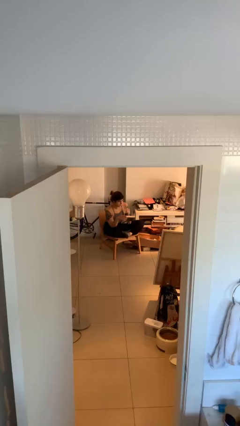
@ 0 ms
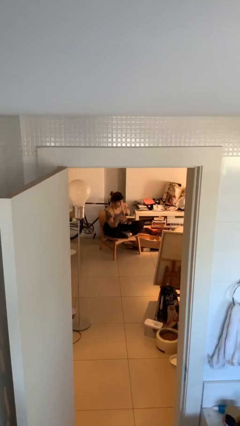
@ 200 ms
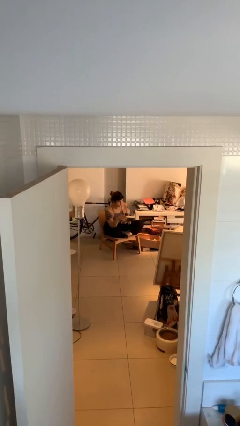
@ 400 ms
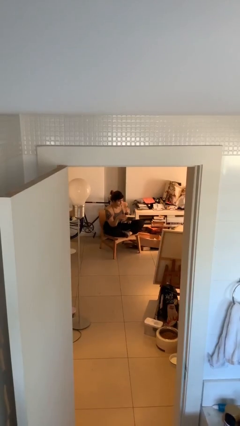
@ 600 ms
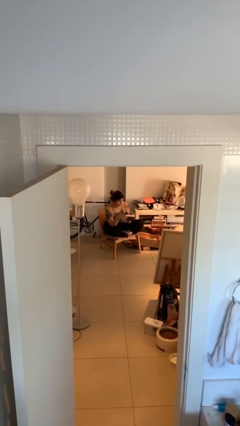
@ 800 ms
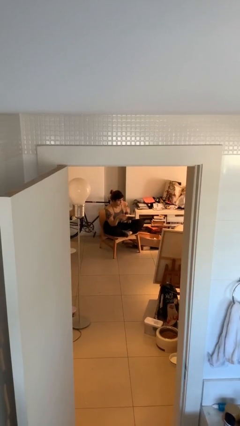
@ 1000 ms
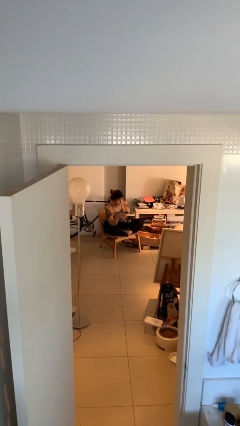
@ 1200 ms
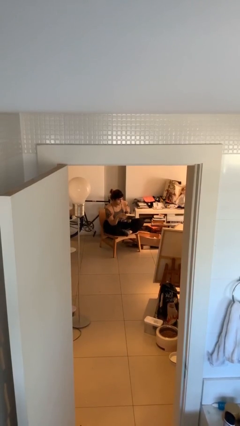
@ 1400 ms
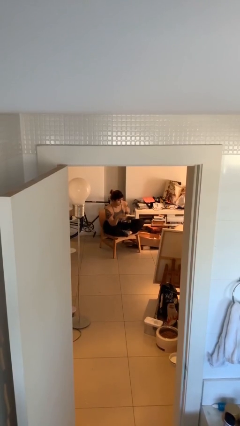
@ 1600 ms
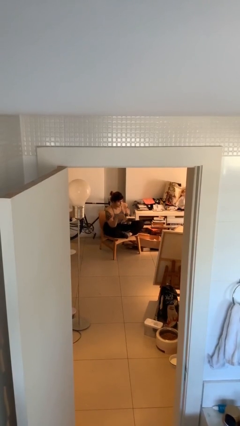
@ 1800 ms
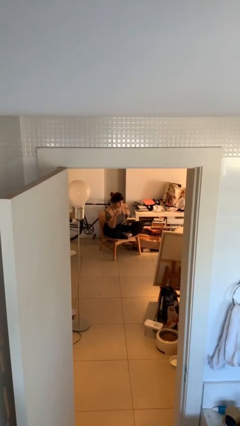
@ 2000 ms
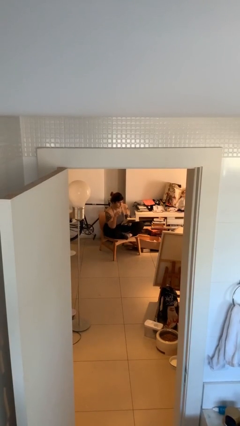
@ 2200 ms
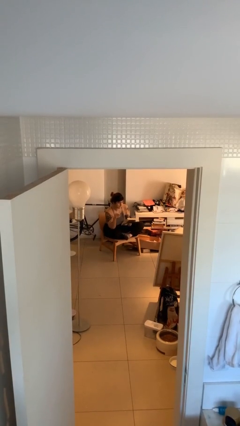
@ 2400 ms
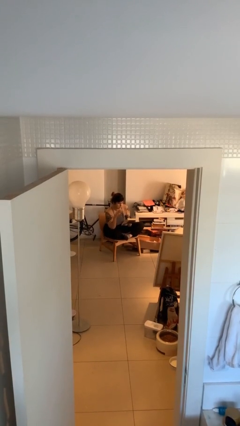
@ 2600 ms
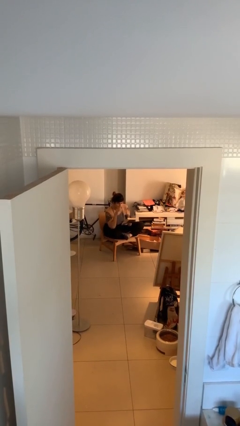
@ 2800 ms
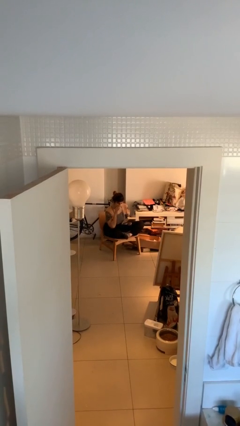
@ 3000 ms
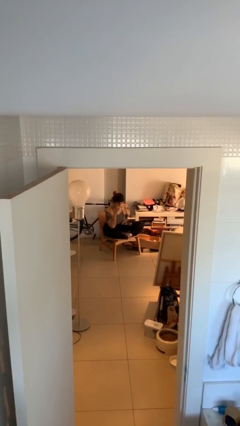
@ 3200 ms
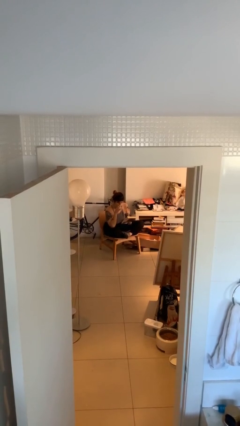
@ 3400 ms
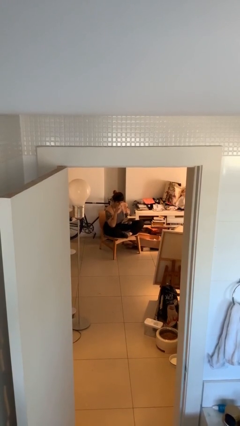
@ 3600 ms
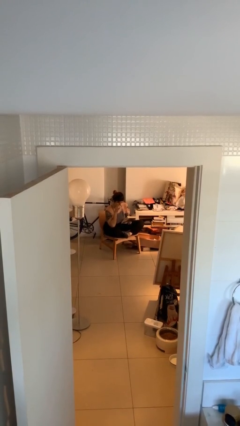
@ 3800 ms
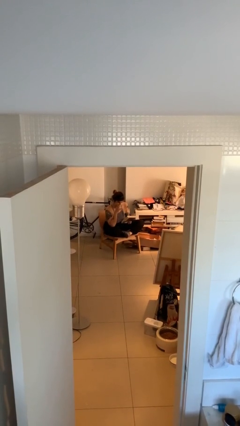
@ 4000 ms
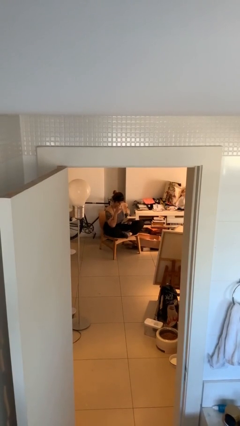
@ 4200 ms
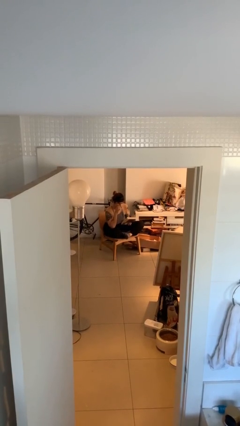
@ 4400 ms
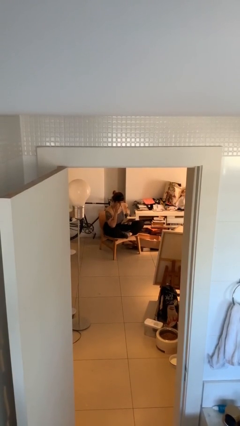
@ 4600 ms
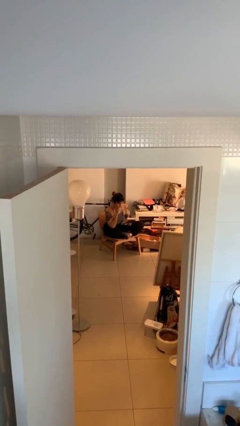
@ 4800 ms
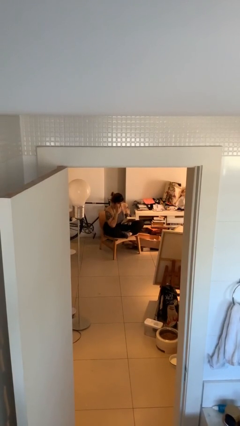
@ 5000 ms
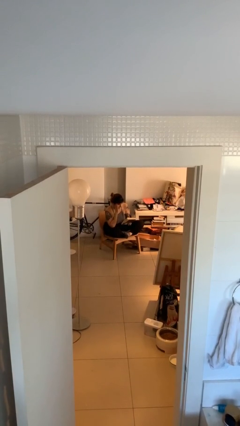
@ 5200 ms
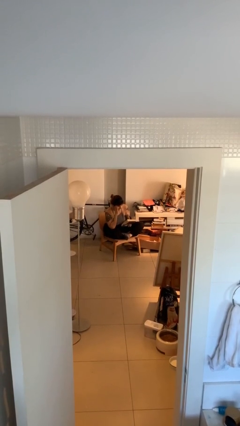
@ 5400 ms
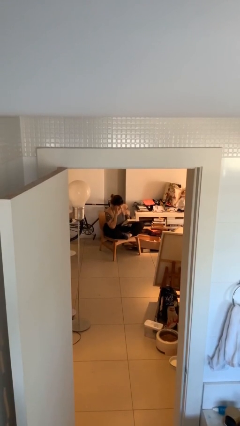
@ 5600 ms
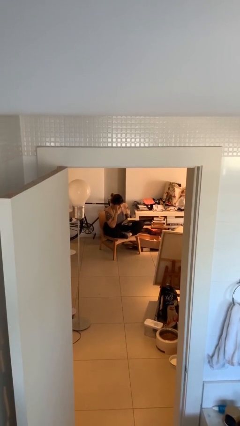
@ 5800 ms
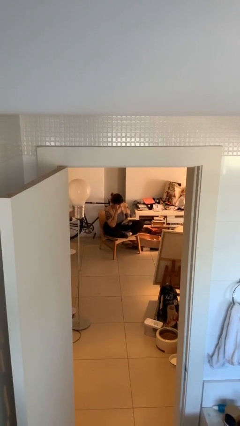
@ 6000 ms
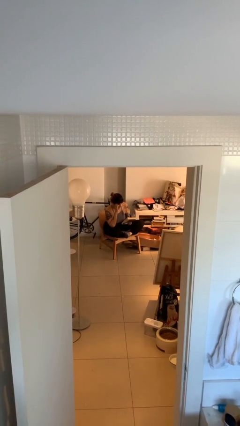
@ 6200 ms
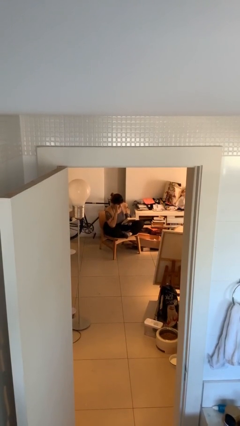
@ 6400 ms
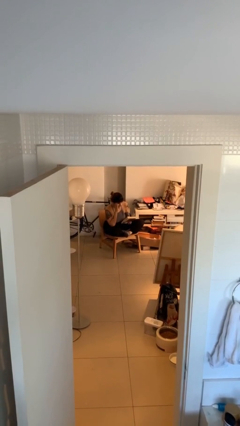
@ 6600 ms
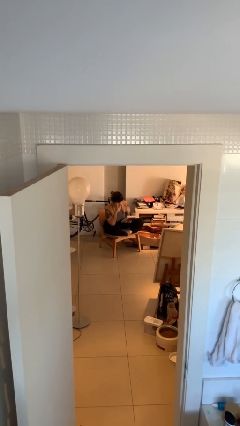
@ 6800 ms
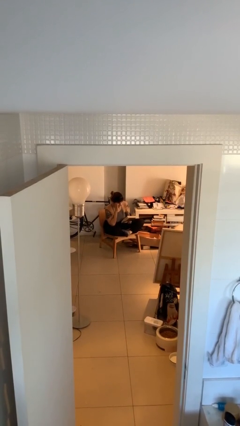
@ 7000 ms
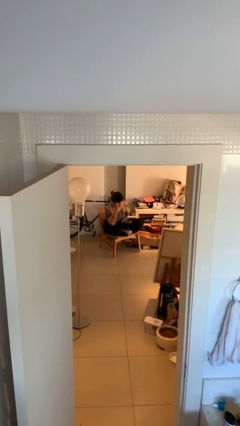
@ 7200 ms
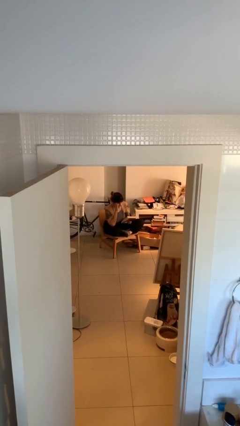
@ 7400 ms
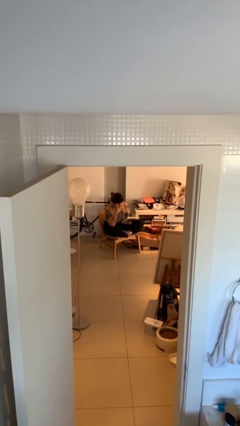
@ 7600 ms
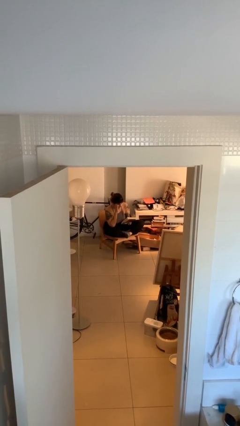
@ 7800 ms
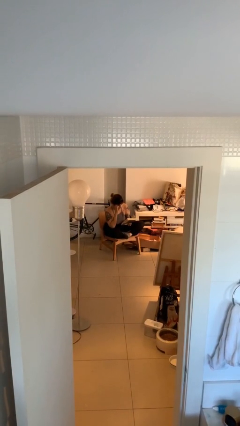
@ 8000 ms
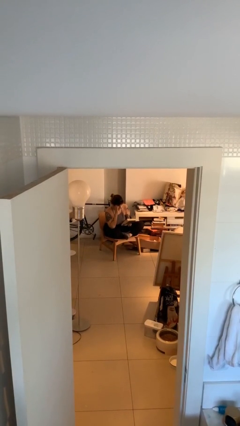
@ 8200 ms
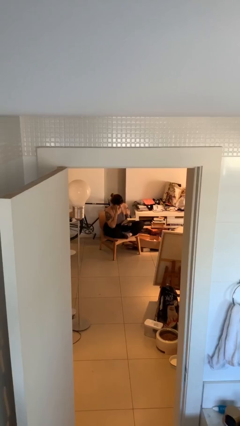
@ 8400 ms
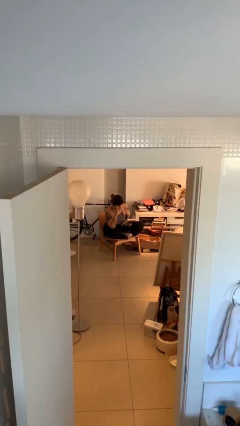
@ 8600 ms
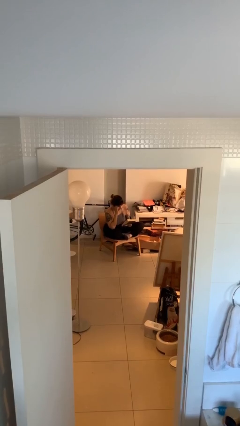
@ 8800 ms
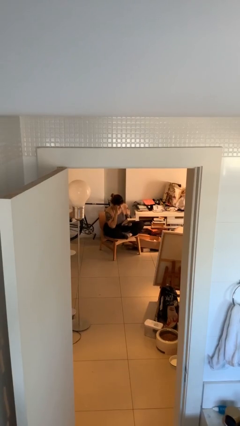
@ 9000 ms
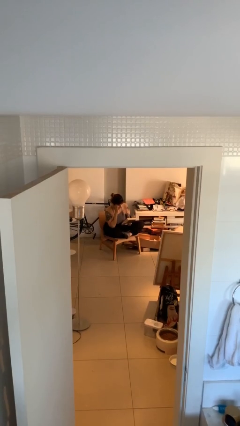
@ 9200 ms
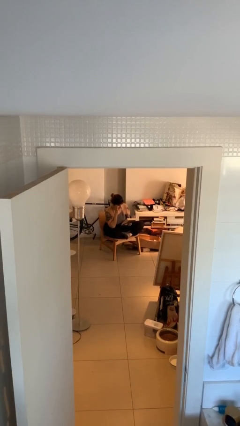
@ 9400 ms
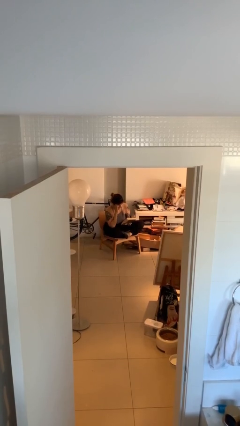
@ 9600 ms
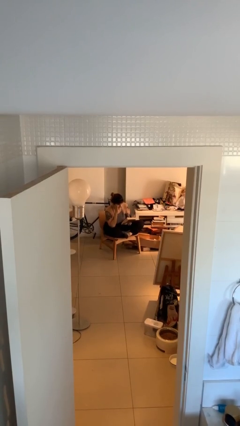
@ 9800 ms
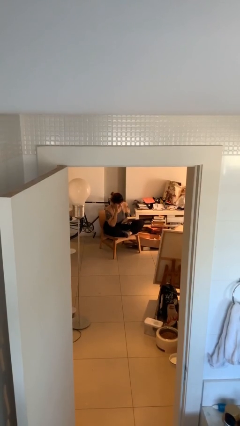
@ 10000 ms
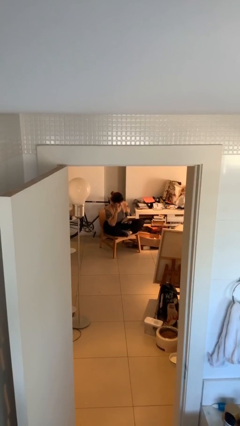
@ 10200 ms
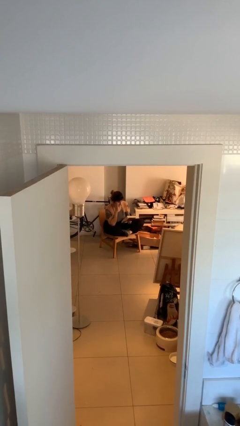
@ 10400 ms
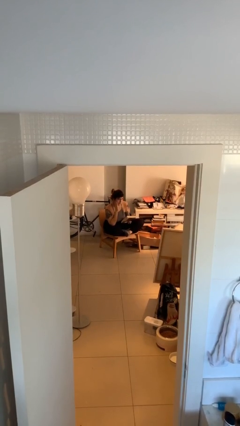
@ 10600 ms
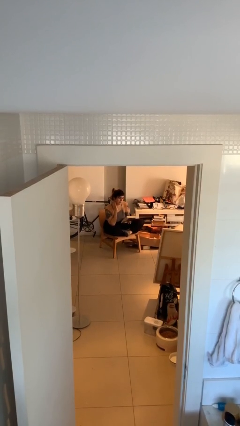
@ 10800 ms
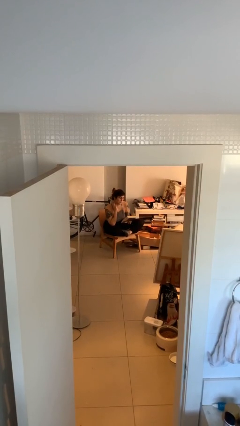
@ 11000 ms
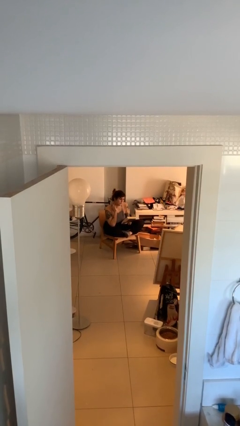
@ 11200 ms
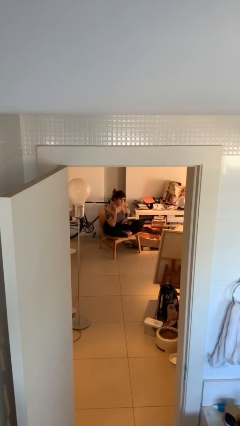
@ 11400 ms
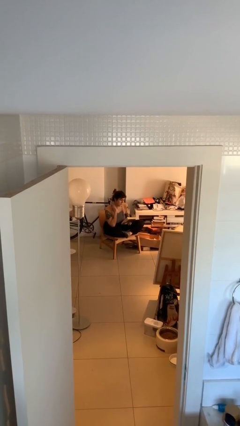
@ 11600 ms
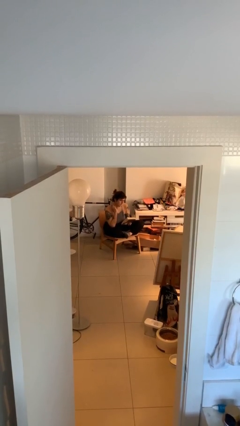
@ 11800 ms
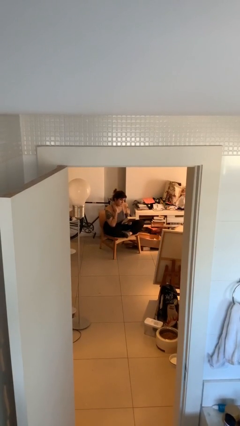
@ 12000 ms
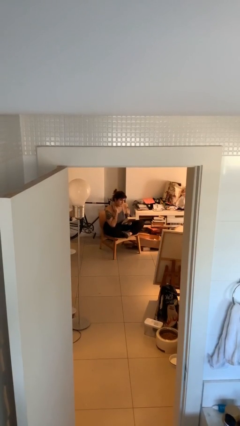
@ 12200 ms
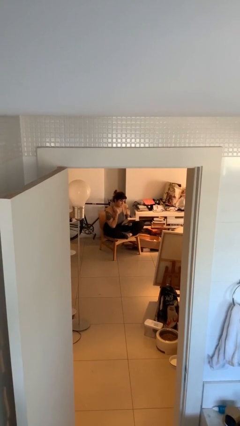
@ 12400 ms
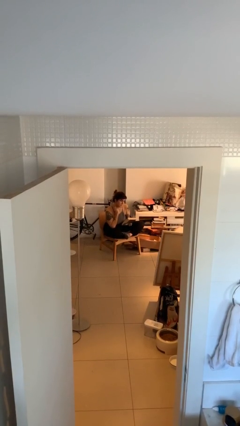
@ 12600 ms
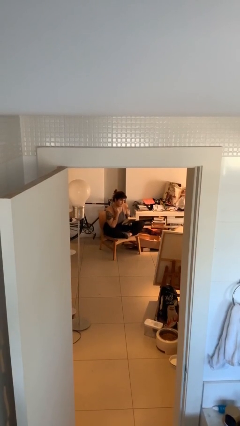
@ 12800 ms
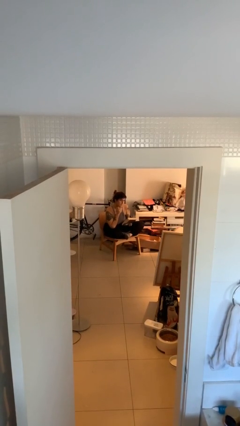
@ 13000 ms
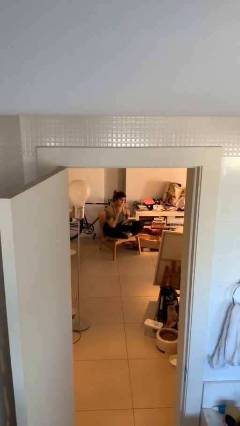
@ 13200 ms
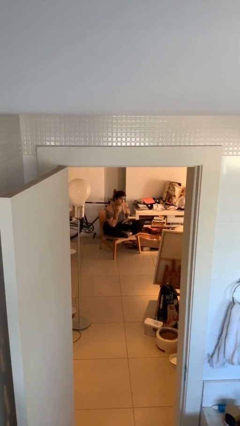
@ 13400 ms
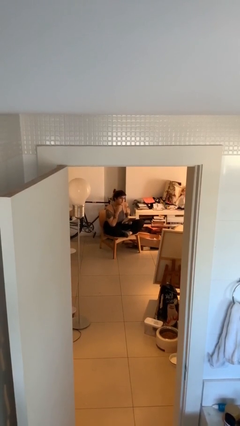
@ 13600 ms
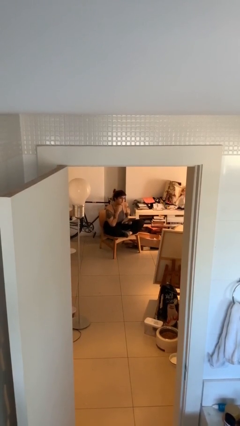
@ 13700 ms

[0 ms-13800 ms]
person reads document

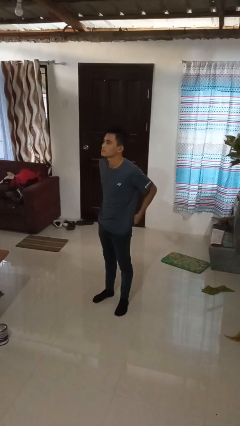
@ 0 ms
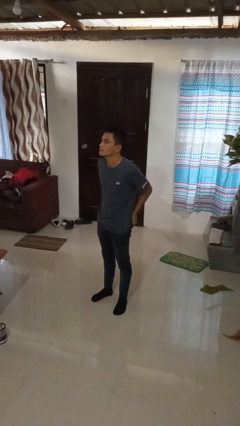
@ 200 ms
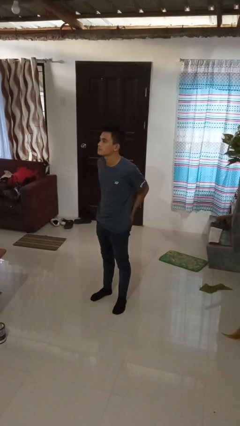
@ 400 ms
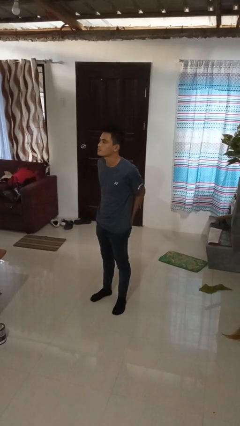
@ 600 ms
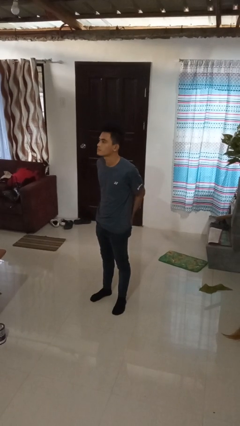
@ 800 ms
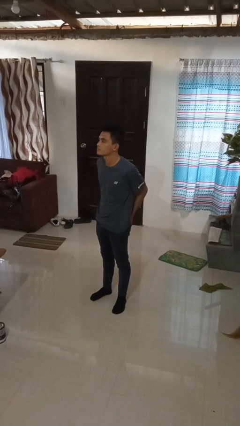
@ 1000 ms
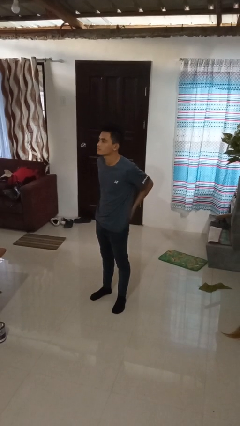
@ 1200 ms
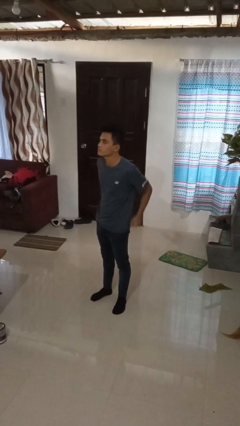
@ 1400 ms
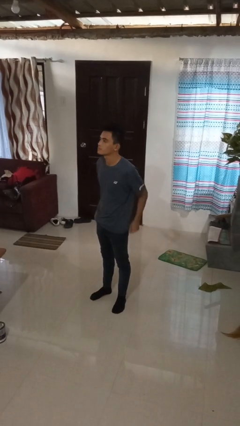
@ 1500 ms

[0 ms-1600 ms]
person puts hands in back pockets

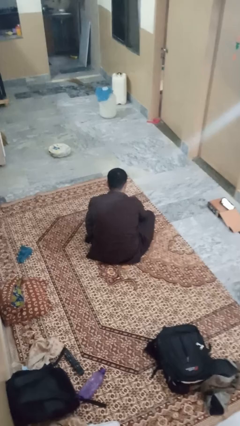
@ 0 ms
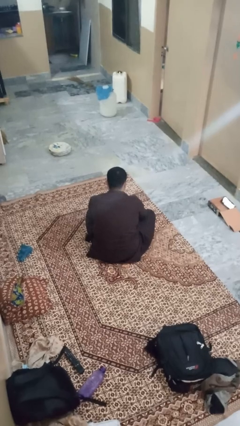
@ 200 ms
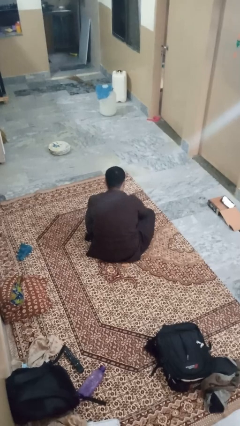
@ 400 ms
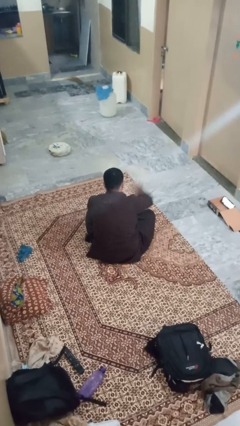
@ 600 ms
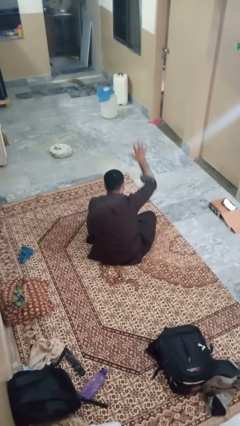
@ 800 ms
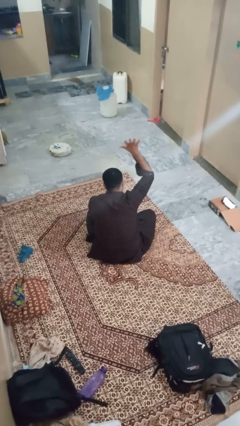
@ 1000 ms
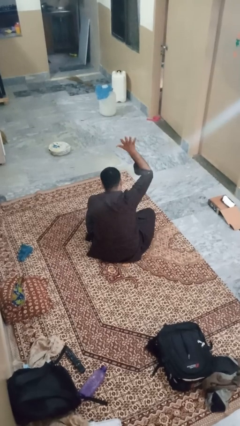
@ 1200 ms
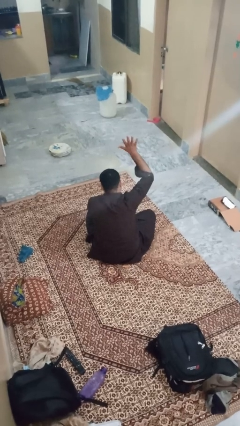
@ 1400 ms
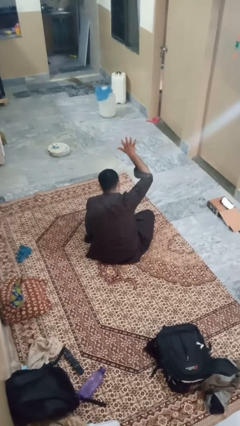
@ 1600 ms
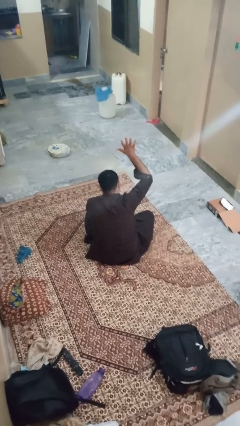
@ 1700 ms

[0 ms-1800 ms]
person gestures number five

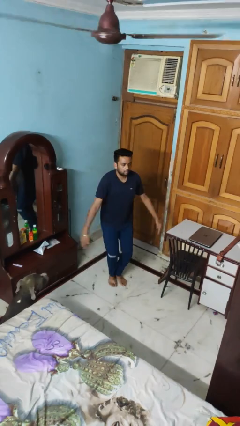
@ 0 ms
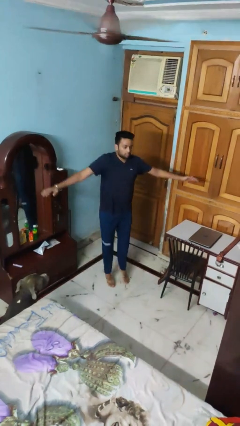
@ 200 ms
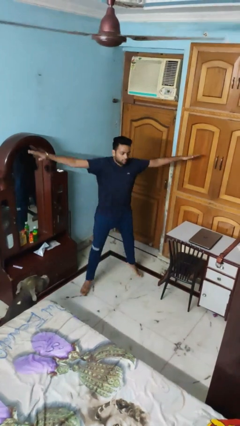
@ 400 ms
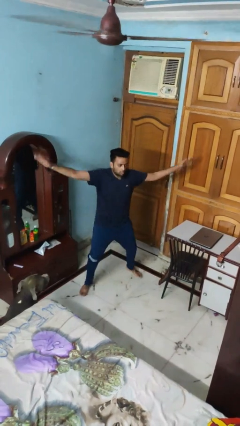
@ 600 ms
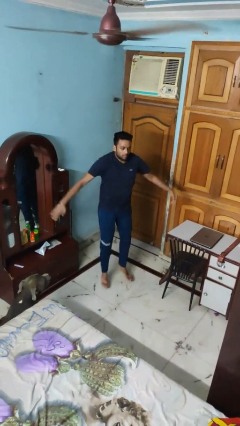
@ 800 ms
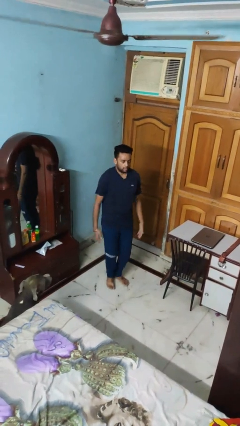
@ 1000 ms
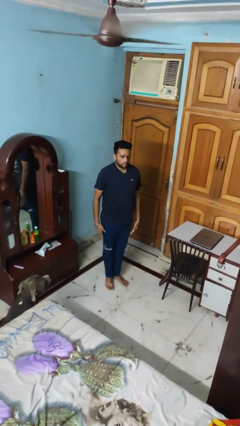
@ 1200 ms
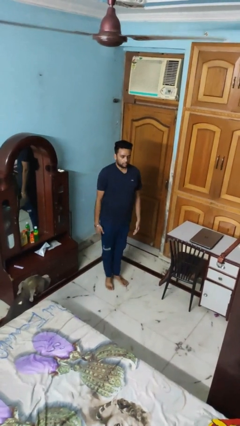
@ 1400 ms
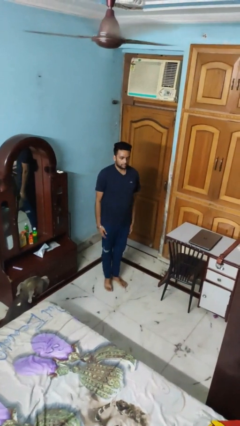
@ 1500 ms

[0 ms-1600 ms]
person exercises with jumping jacks
